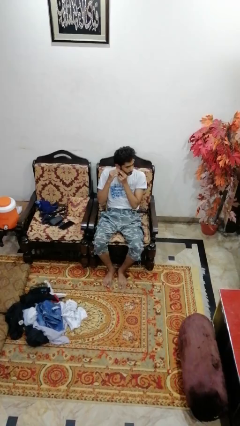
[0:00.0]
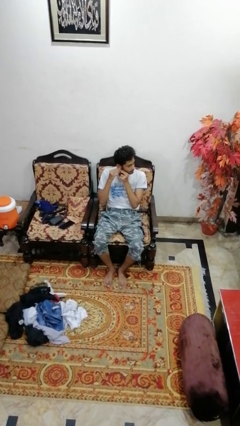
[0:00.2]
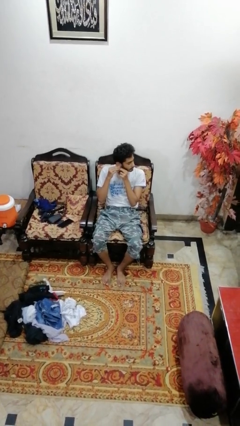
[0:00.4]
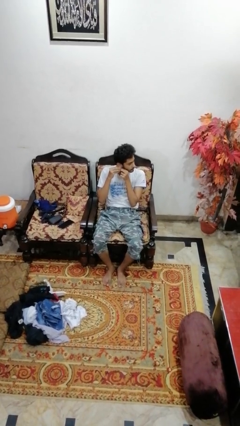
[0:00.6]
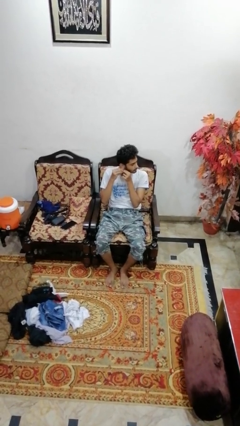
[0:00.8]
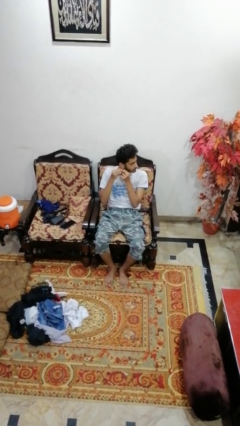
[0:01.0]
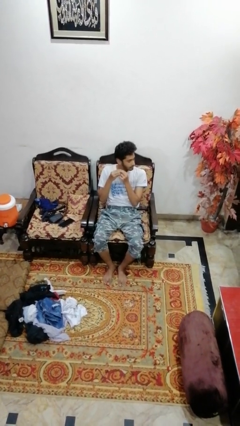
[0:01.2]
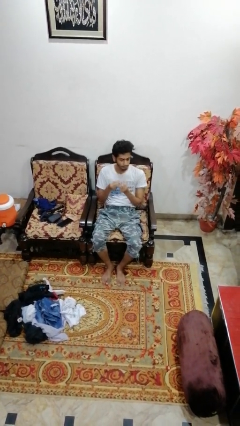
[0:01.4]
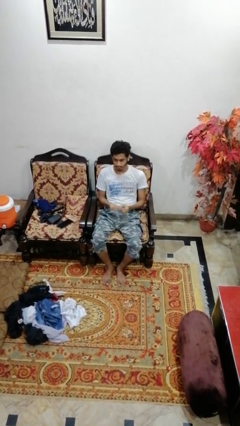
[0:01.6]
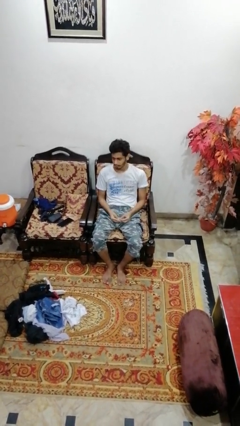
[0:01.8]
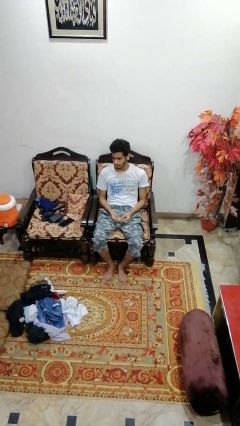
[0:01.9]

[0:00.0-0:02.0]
person takes off earrings

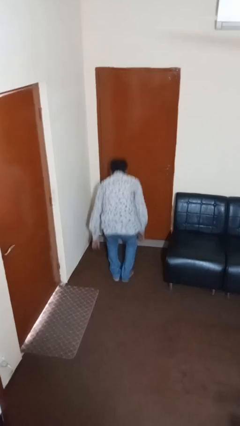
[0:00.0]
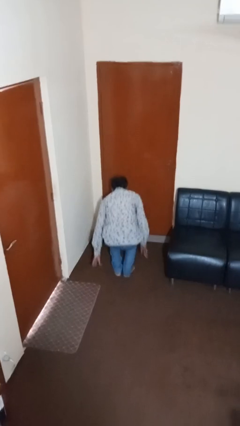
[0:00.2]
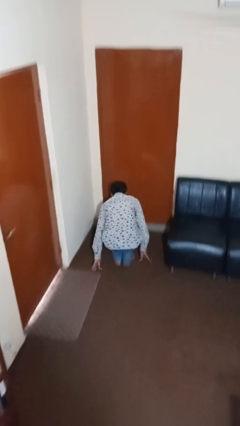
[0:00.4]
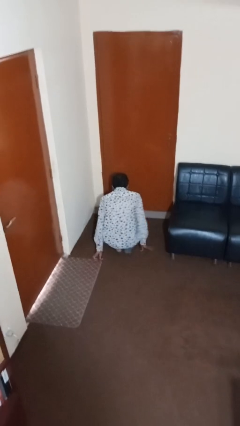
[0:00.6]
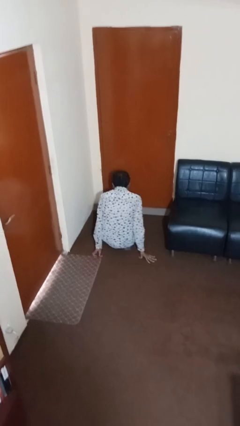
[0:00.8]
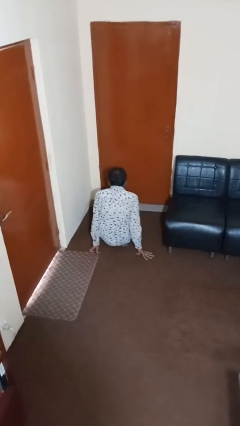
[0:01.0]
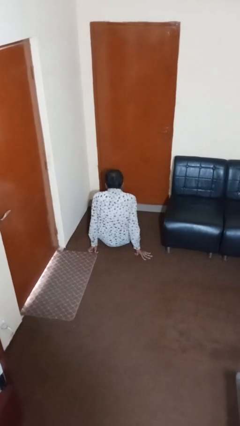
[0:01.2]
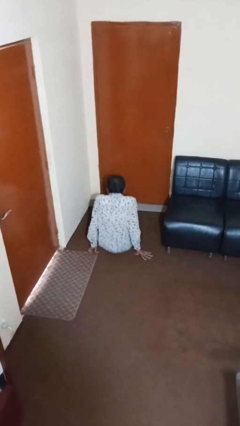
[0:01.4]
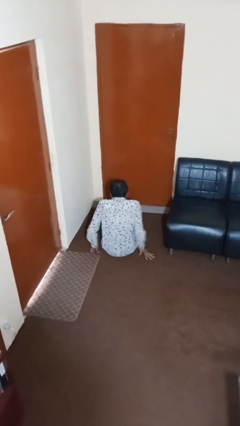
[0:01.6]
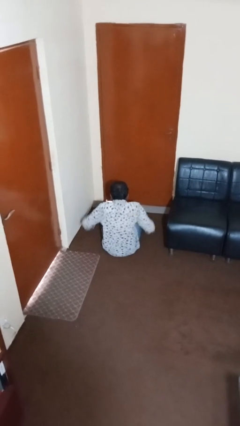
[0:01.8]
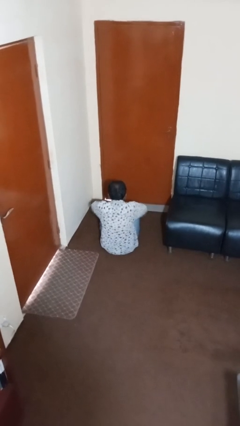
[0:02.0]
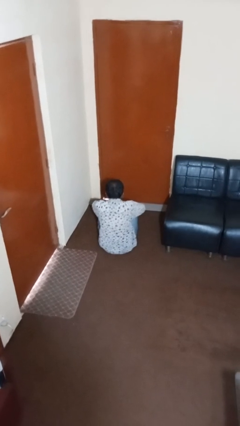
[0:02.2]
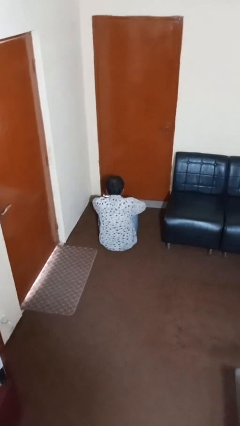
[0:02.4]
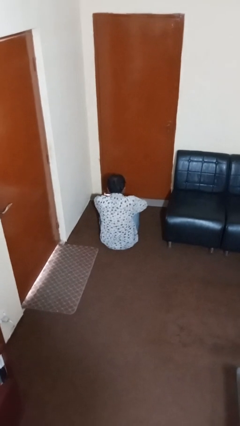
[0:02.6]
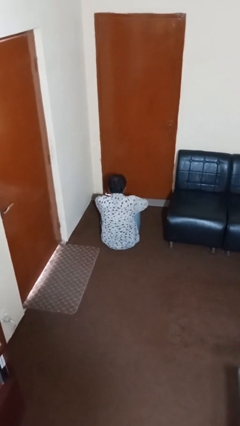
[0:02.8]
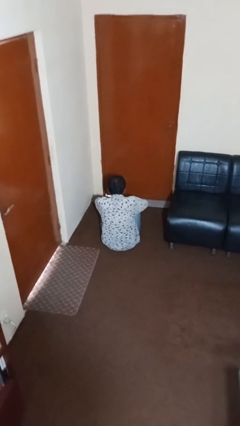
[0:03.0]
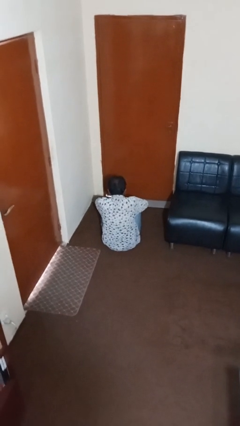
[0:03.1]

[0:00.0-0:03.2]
person sits crisscross

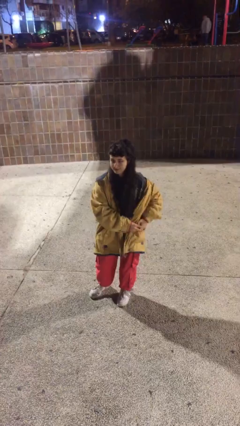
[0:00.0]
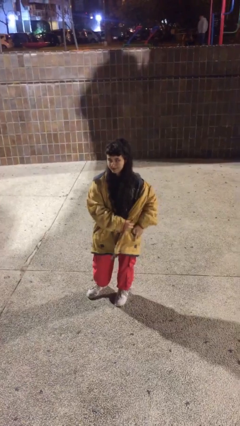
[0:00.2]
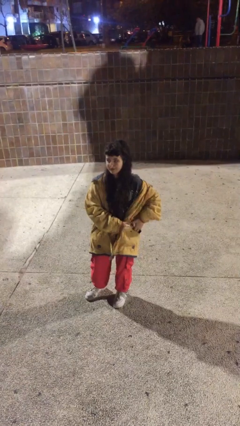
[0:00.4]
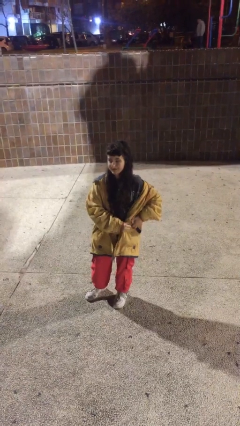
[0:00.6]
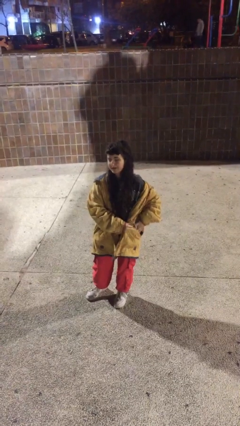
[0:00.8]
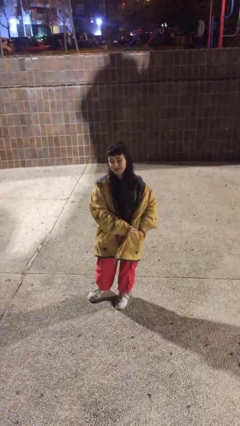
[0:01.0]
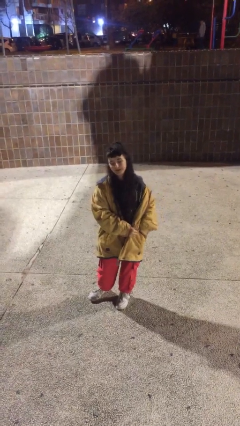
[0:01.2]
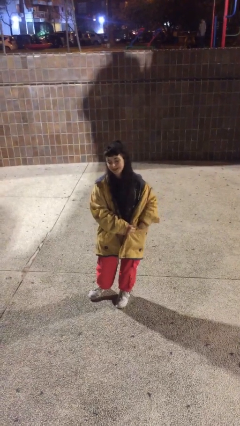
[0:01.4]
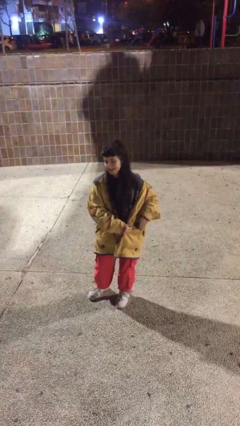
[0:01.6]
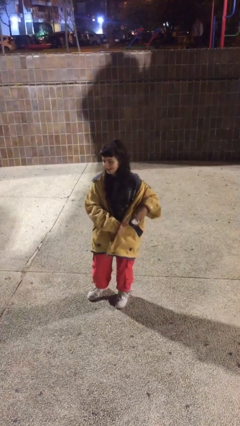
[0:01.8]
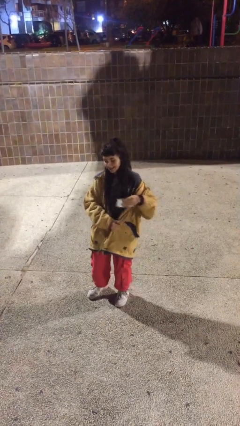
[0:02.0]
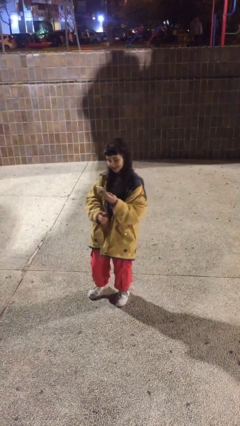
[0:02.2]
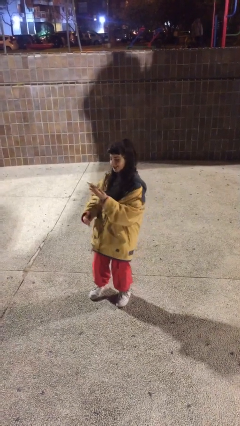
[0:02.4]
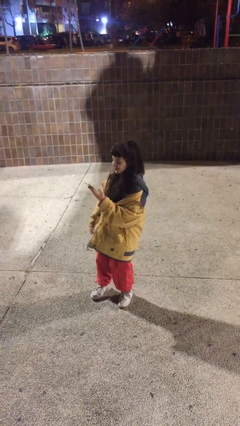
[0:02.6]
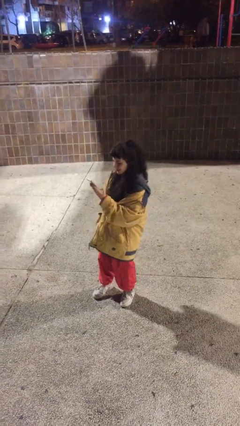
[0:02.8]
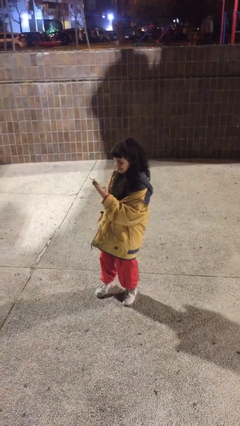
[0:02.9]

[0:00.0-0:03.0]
person takes phone from pocket

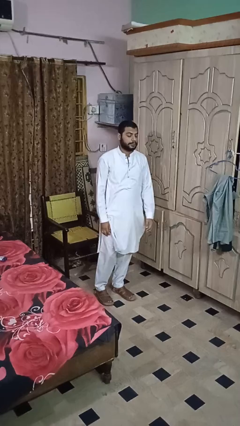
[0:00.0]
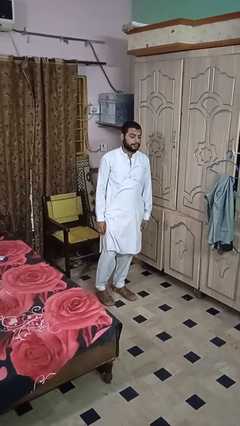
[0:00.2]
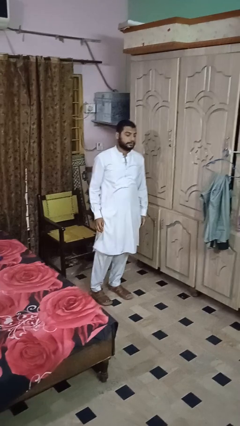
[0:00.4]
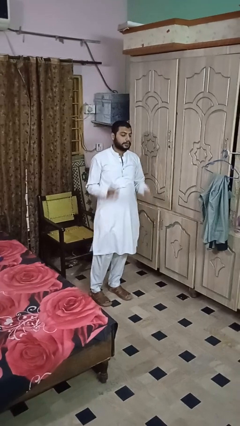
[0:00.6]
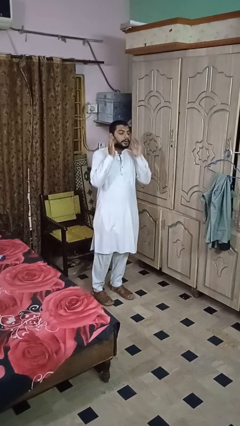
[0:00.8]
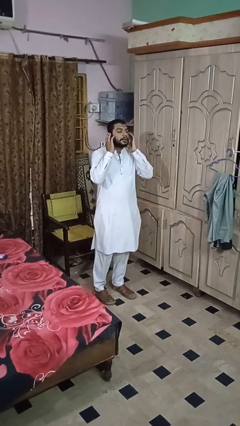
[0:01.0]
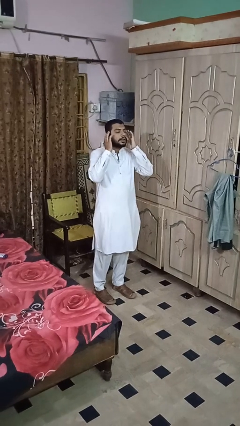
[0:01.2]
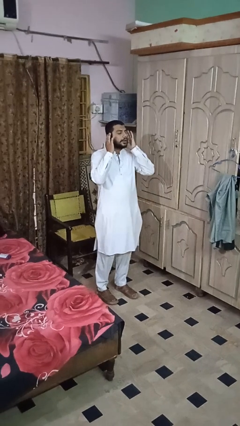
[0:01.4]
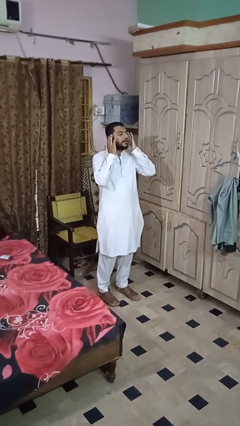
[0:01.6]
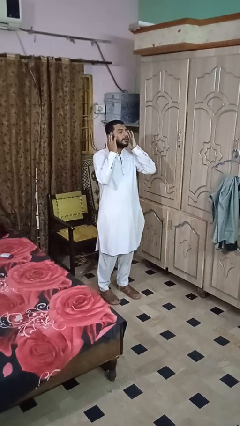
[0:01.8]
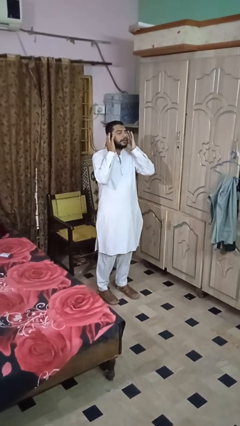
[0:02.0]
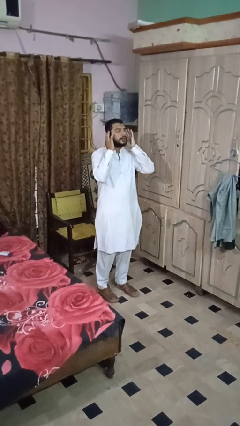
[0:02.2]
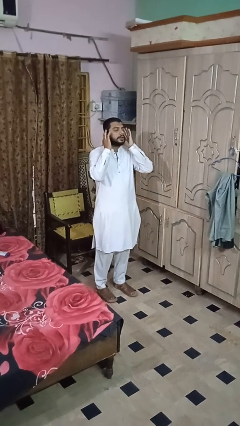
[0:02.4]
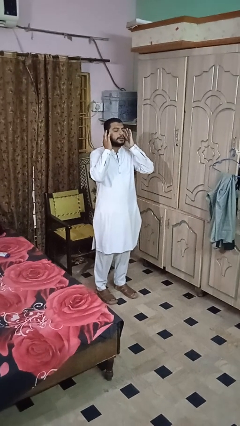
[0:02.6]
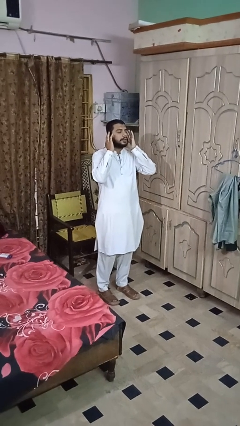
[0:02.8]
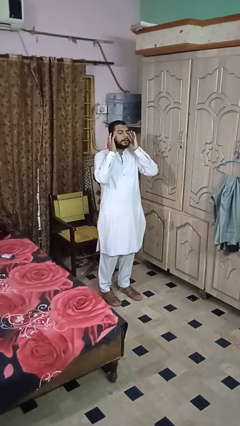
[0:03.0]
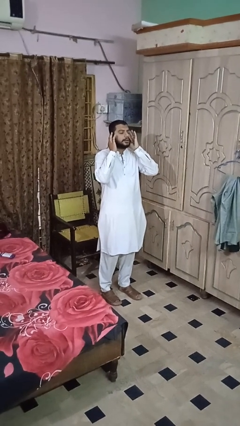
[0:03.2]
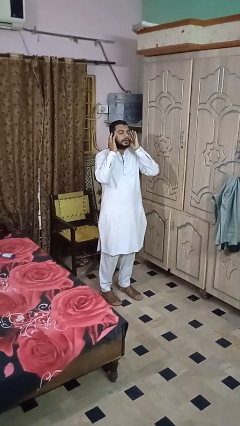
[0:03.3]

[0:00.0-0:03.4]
person puts fingers in ear

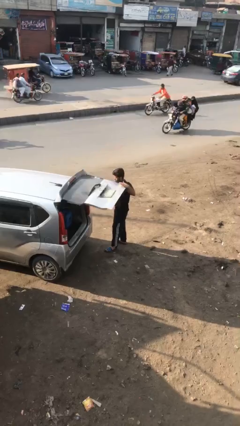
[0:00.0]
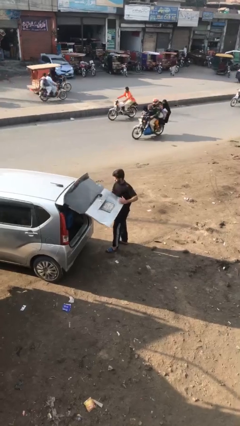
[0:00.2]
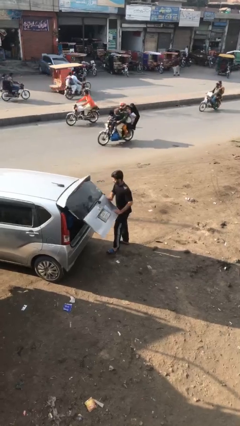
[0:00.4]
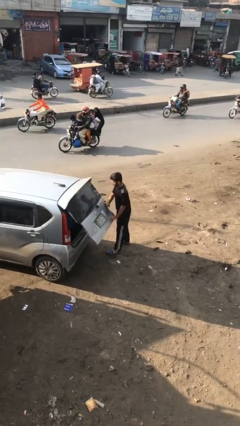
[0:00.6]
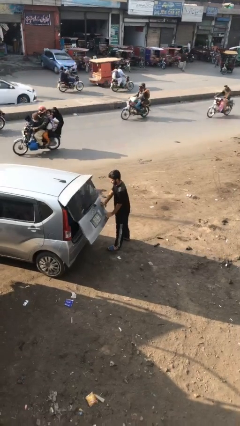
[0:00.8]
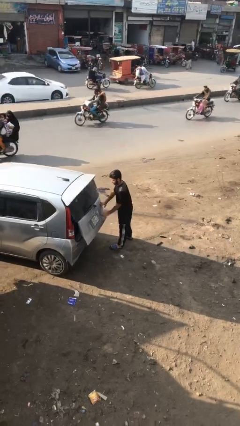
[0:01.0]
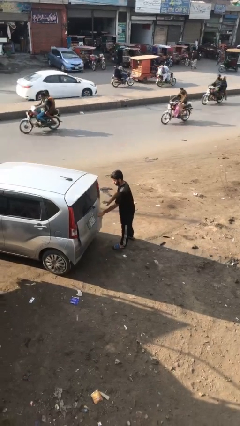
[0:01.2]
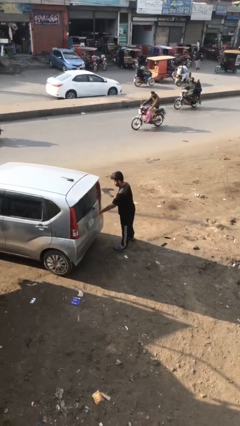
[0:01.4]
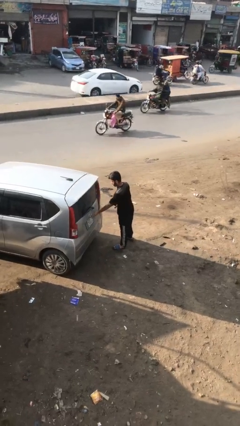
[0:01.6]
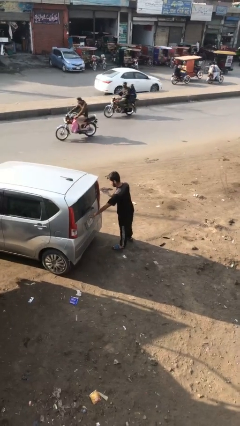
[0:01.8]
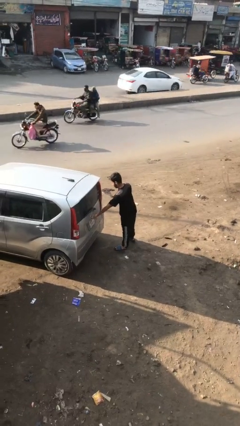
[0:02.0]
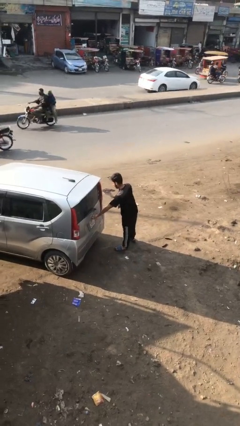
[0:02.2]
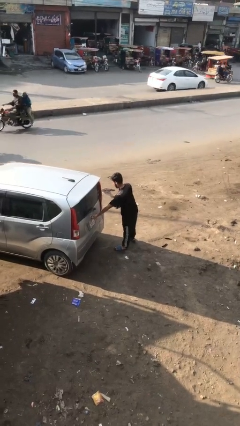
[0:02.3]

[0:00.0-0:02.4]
person closes car trunk

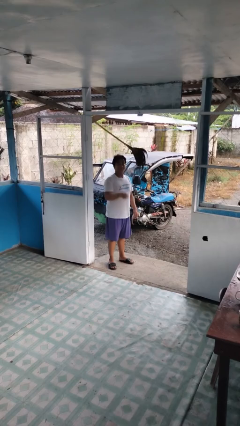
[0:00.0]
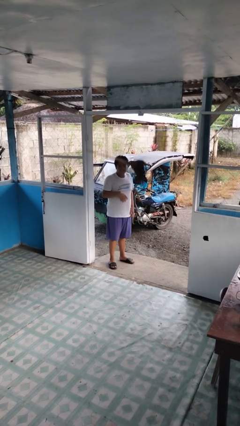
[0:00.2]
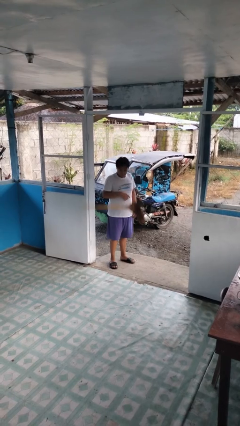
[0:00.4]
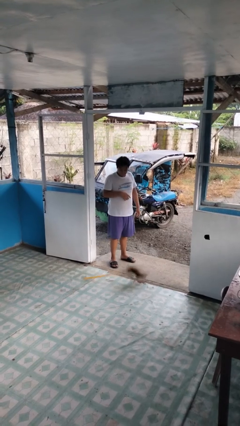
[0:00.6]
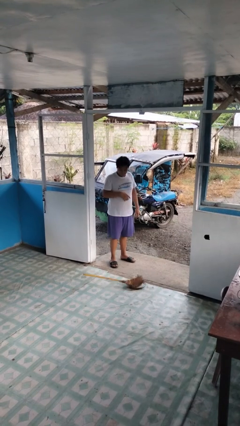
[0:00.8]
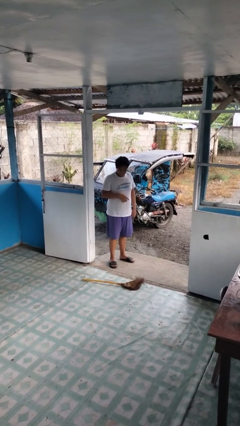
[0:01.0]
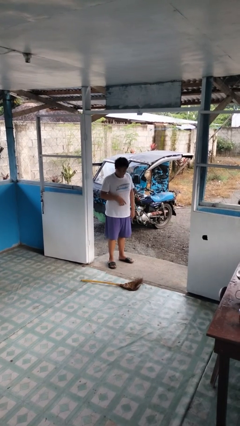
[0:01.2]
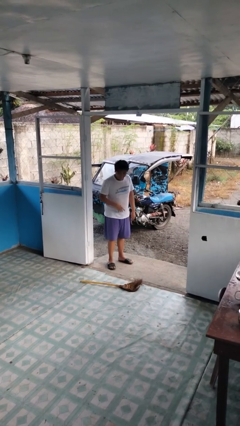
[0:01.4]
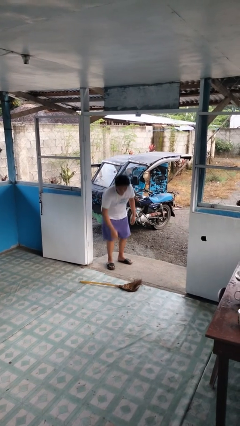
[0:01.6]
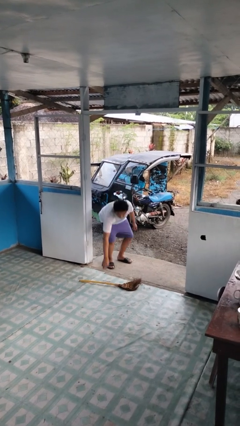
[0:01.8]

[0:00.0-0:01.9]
person throws object into air

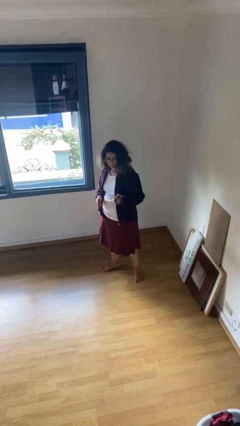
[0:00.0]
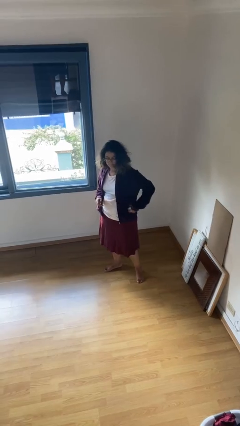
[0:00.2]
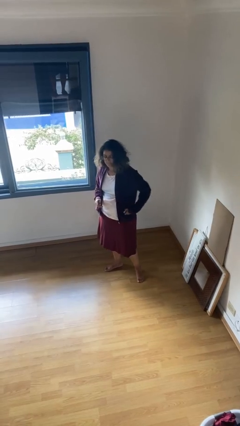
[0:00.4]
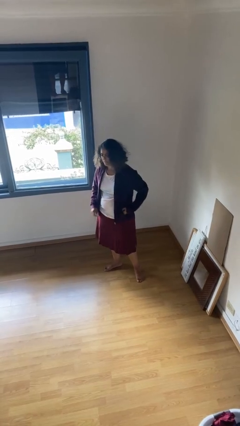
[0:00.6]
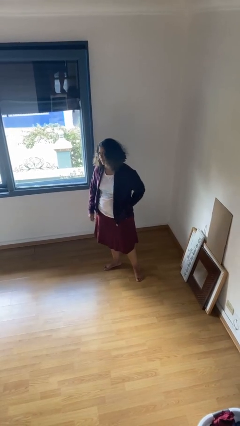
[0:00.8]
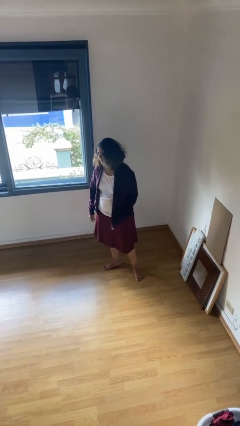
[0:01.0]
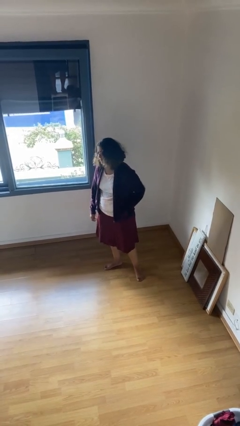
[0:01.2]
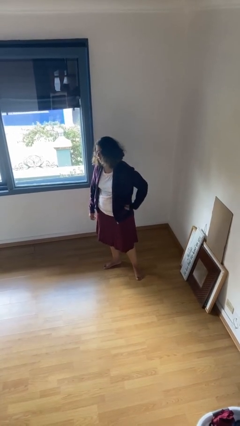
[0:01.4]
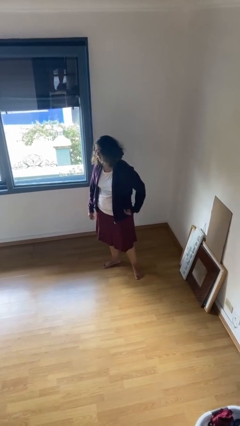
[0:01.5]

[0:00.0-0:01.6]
person puts phone into pocket
